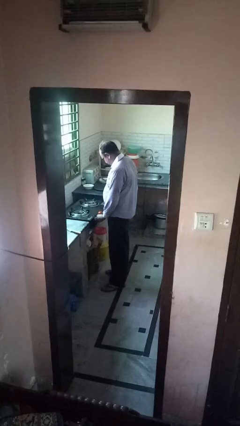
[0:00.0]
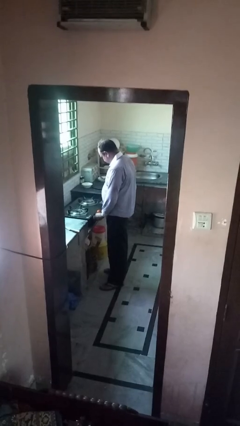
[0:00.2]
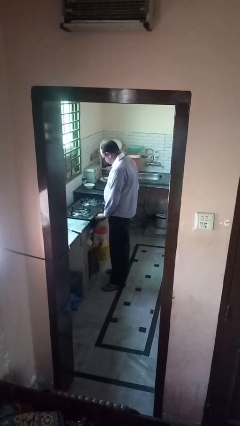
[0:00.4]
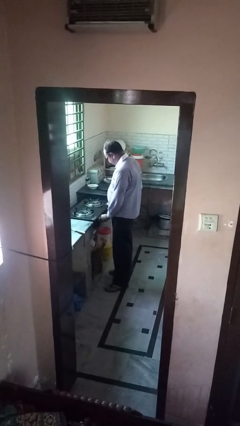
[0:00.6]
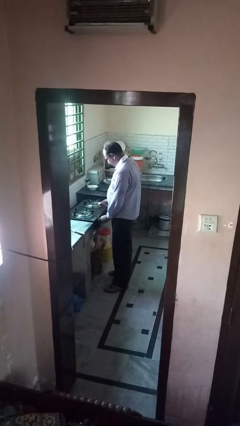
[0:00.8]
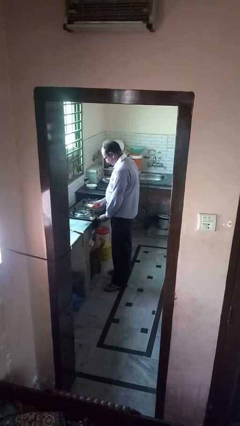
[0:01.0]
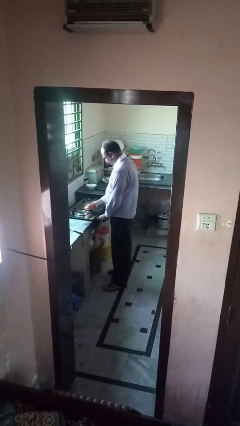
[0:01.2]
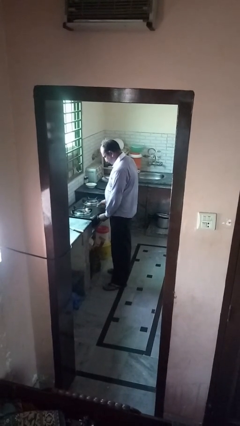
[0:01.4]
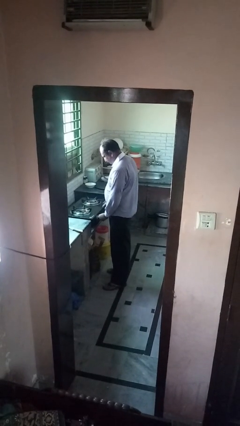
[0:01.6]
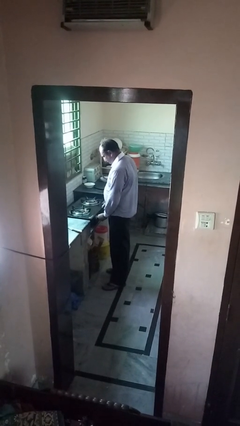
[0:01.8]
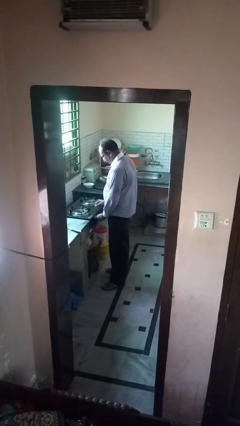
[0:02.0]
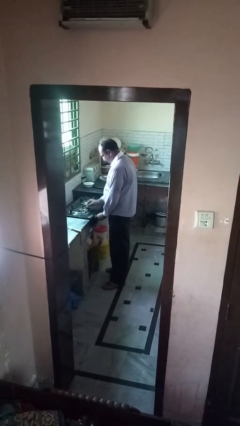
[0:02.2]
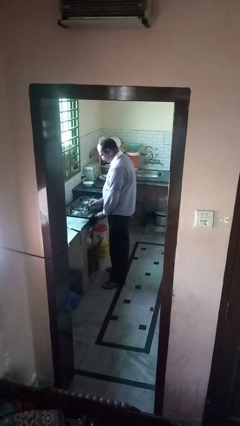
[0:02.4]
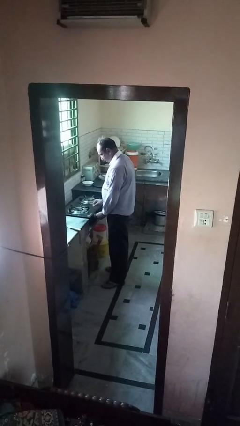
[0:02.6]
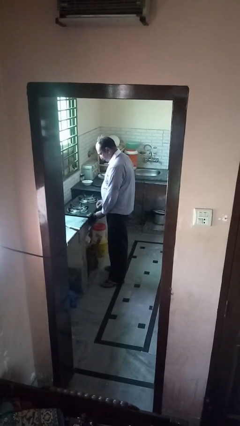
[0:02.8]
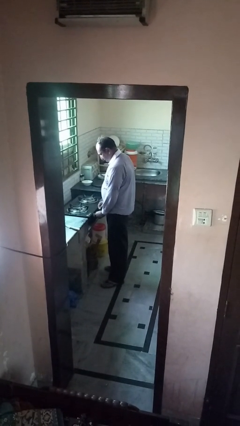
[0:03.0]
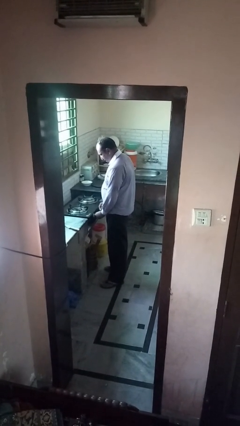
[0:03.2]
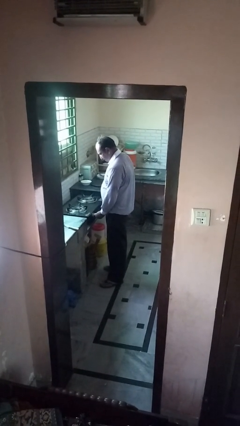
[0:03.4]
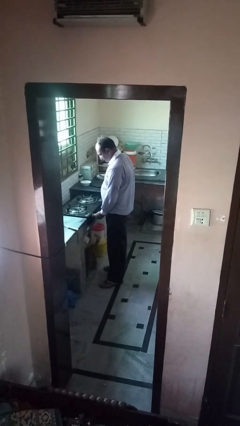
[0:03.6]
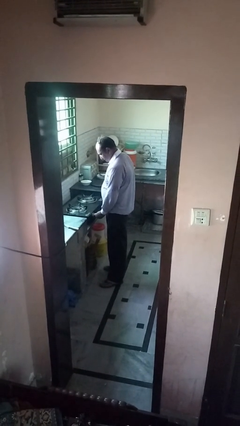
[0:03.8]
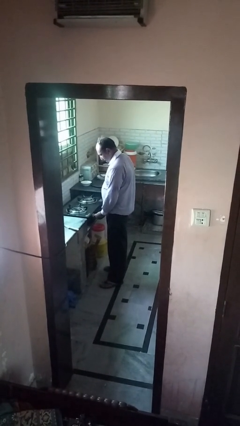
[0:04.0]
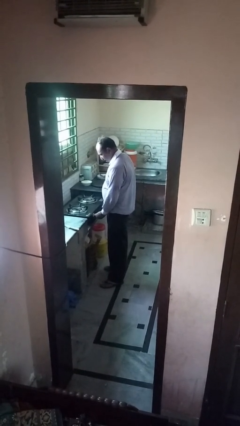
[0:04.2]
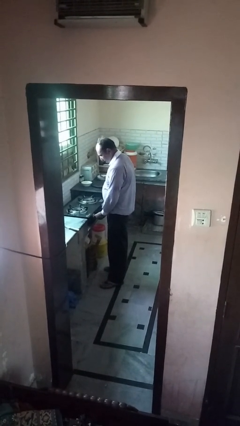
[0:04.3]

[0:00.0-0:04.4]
person turns on stovetop

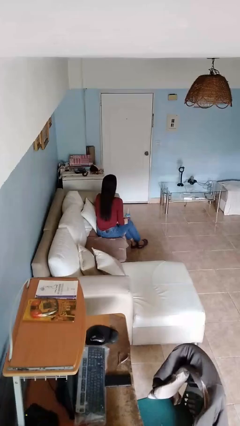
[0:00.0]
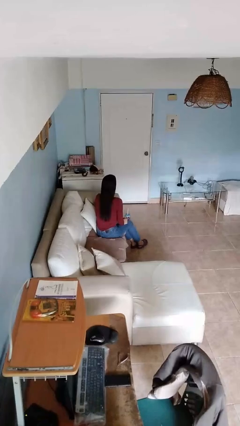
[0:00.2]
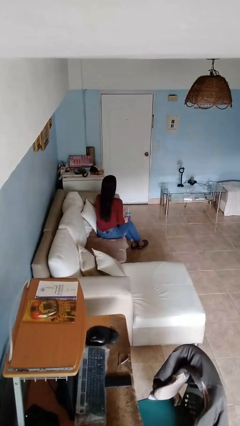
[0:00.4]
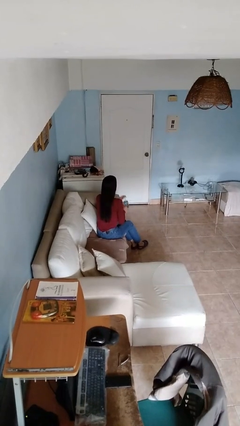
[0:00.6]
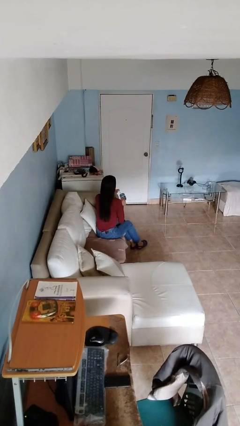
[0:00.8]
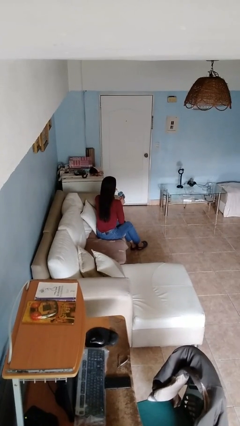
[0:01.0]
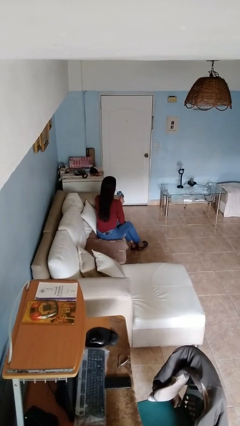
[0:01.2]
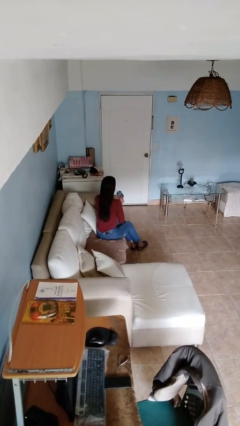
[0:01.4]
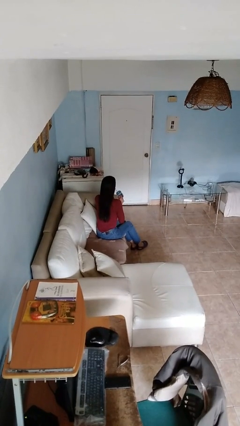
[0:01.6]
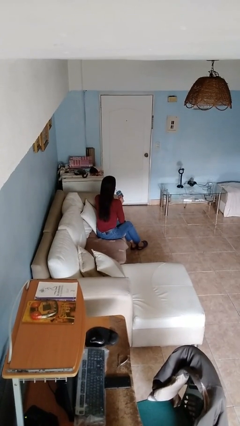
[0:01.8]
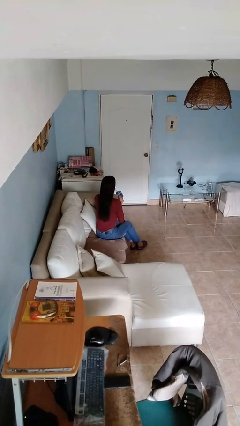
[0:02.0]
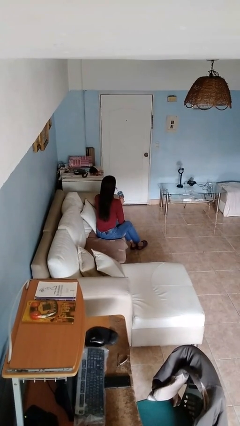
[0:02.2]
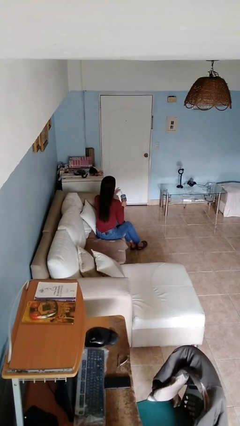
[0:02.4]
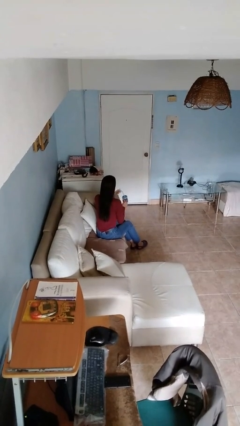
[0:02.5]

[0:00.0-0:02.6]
person drinks from straw

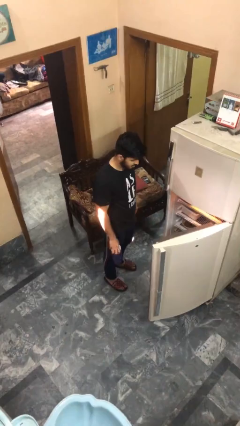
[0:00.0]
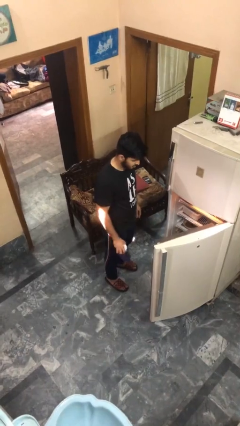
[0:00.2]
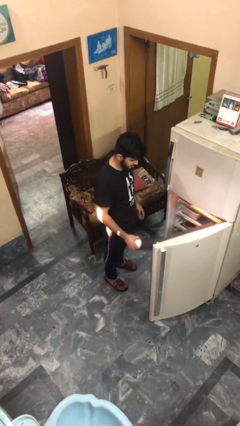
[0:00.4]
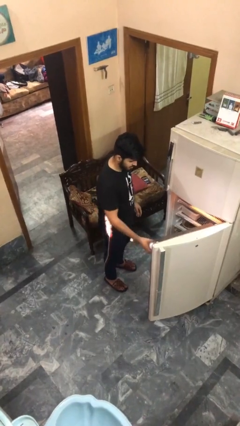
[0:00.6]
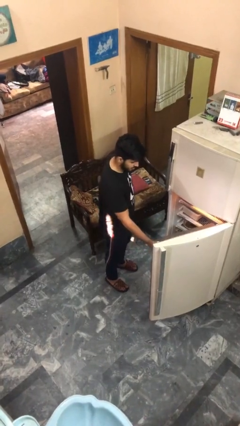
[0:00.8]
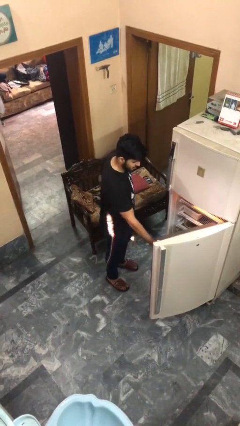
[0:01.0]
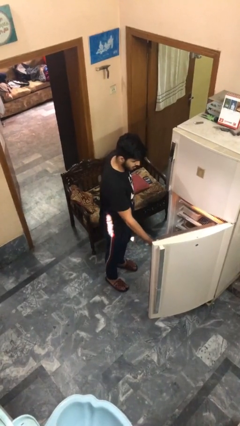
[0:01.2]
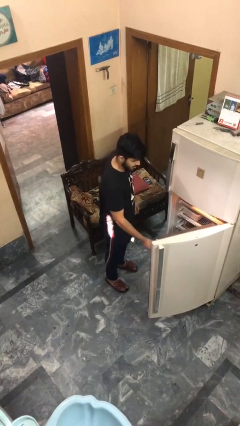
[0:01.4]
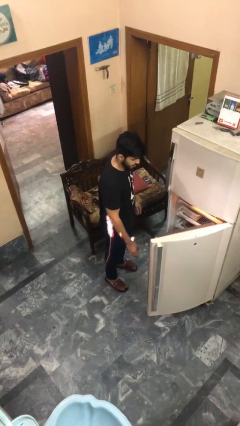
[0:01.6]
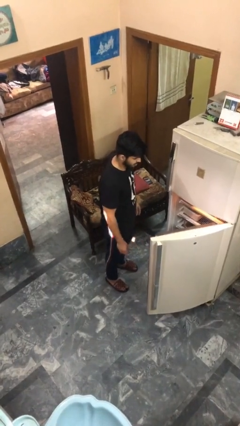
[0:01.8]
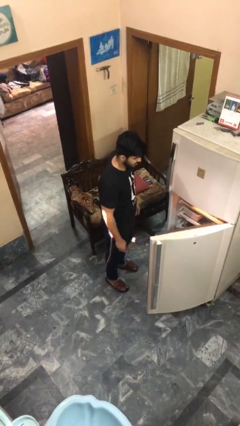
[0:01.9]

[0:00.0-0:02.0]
person puts object into refrigerator

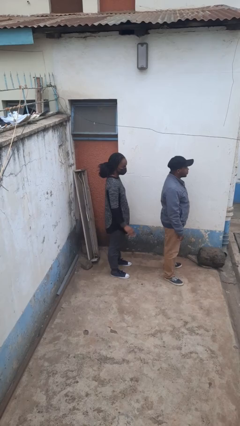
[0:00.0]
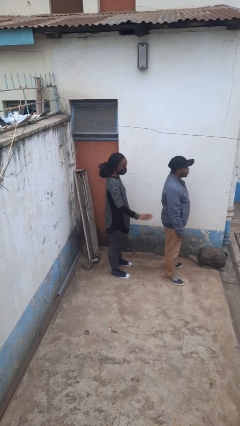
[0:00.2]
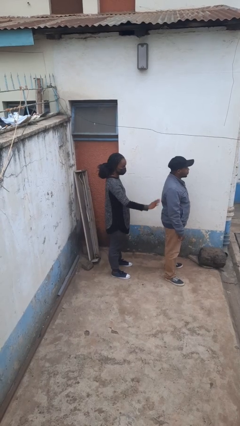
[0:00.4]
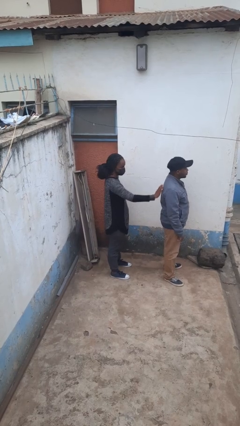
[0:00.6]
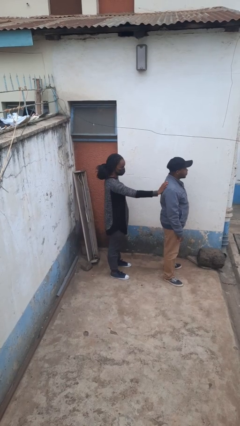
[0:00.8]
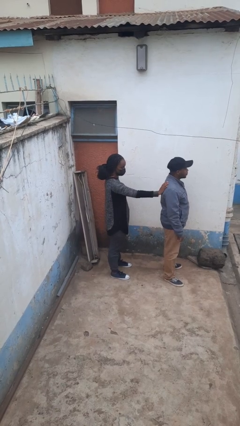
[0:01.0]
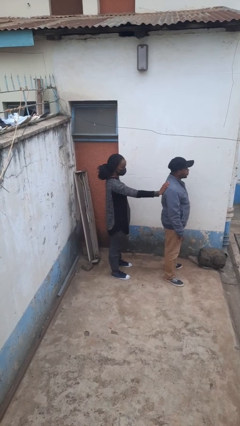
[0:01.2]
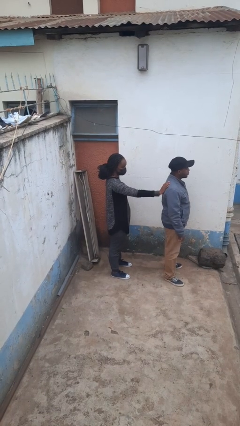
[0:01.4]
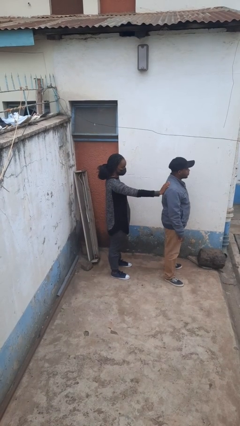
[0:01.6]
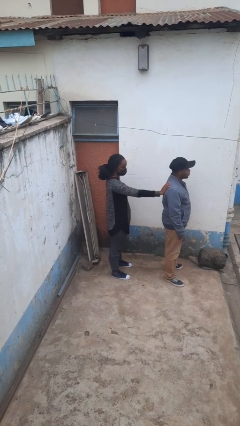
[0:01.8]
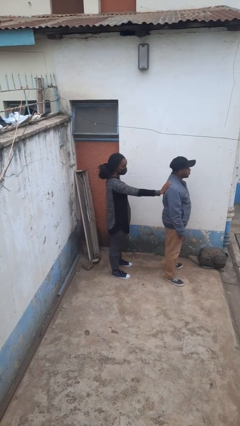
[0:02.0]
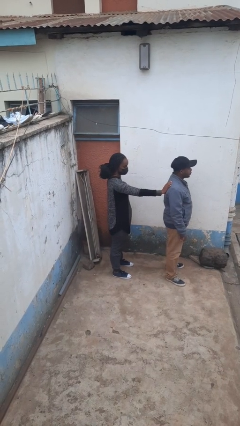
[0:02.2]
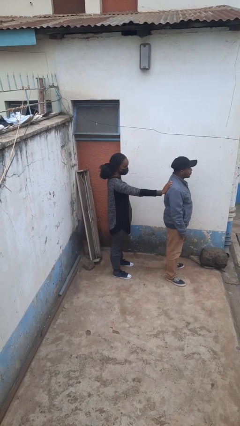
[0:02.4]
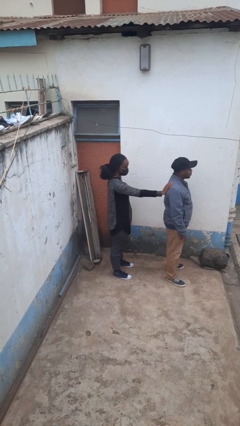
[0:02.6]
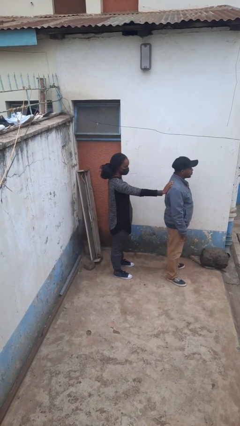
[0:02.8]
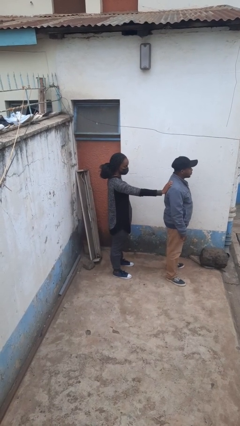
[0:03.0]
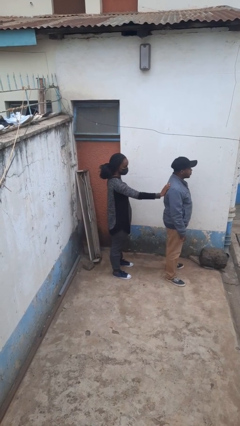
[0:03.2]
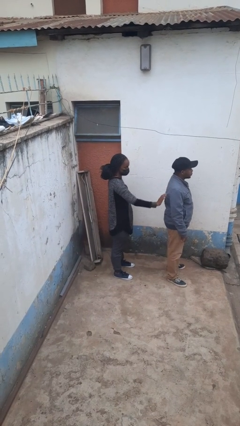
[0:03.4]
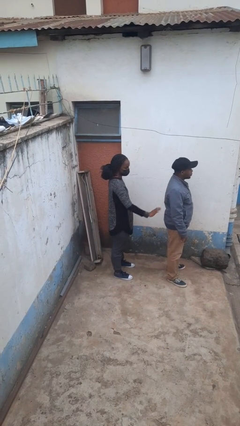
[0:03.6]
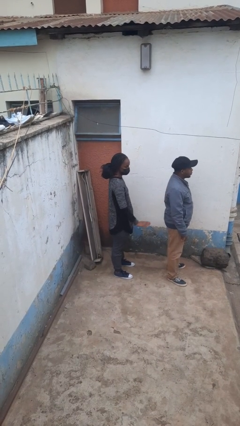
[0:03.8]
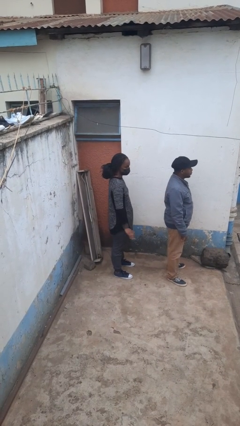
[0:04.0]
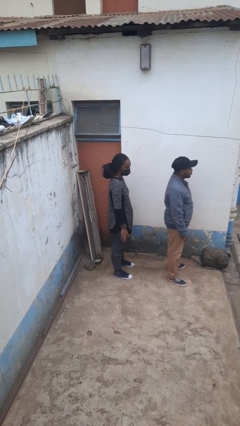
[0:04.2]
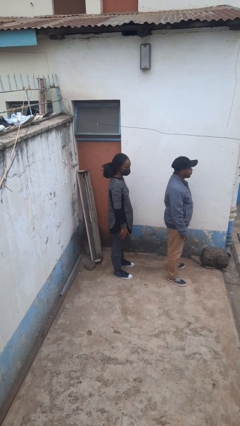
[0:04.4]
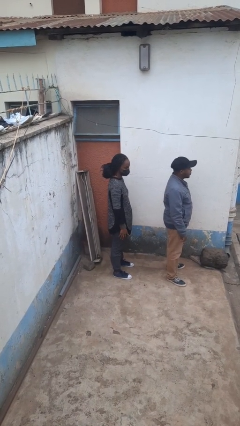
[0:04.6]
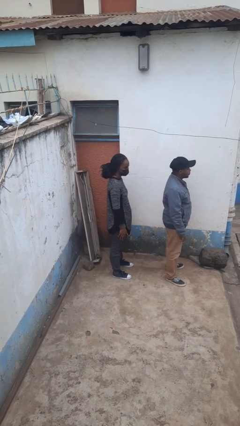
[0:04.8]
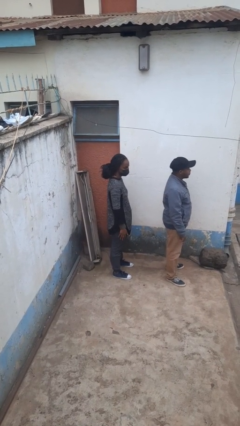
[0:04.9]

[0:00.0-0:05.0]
person touches back of person

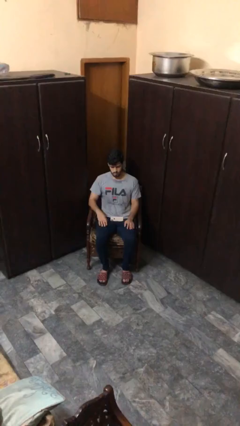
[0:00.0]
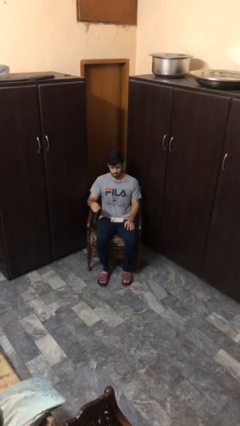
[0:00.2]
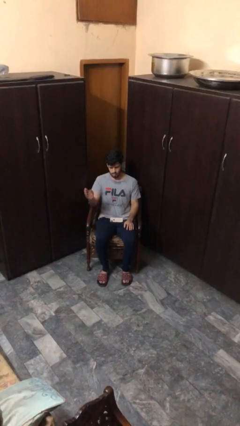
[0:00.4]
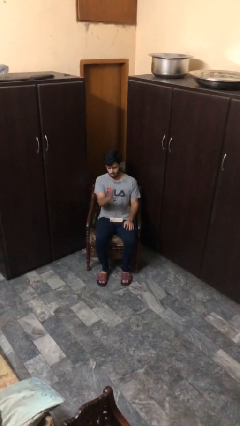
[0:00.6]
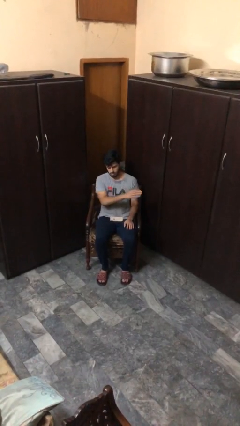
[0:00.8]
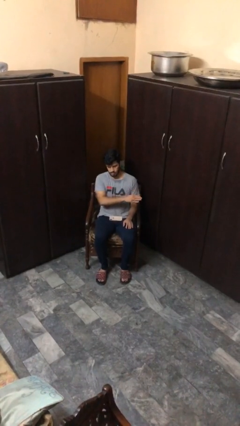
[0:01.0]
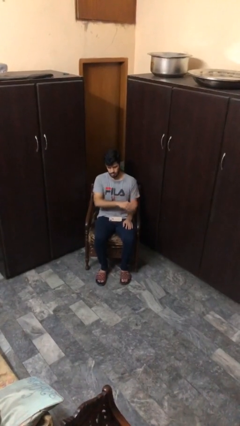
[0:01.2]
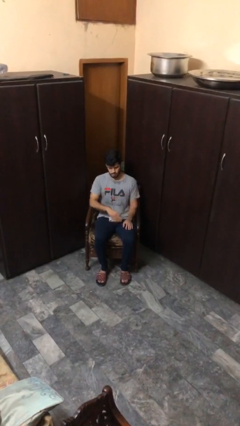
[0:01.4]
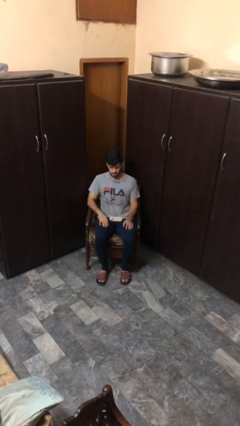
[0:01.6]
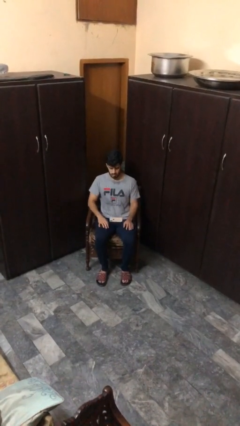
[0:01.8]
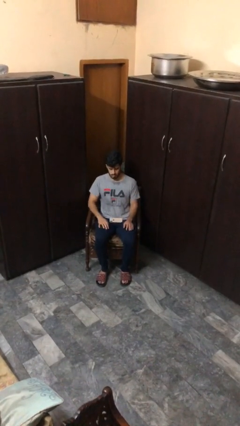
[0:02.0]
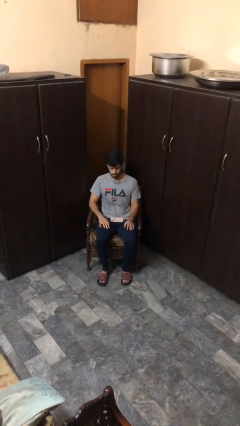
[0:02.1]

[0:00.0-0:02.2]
person gestures swipe left

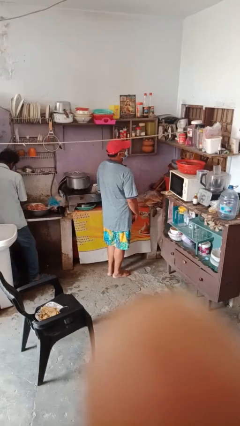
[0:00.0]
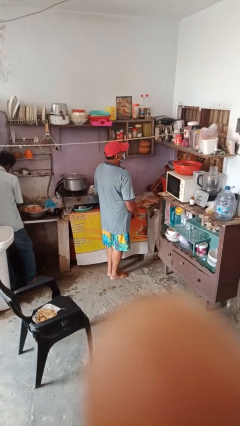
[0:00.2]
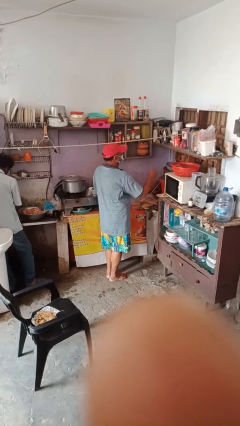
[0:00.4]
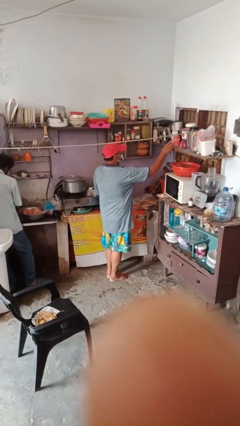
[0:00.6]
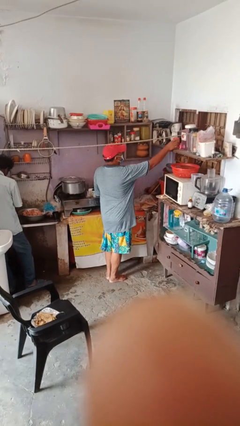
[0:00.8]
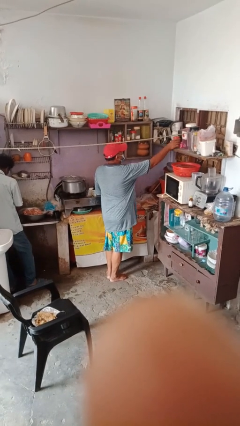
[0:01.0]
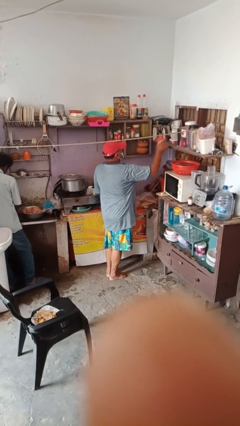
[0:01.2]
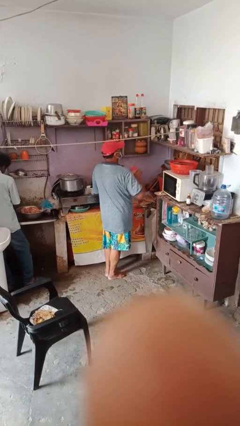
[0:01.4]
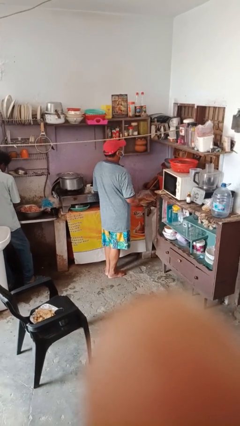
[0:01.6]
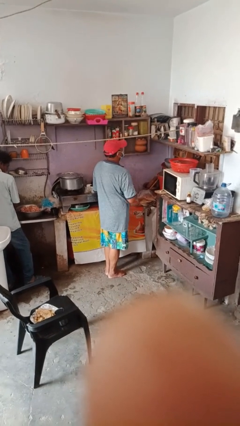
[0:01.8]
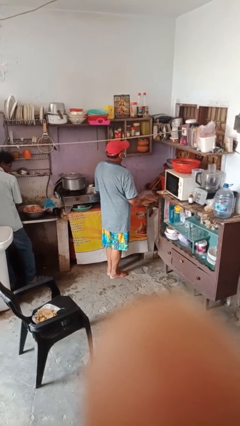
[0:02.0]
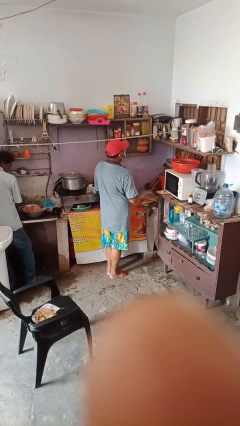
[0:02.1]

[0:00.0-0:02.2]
person picks up object from shelf
